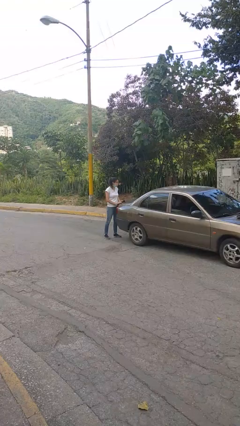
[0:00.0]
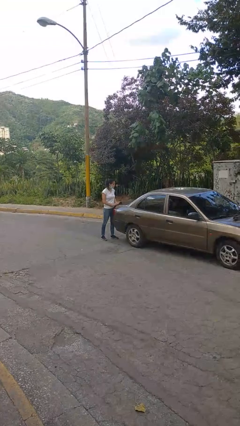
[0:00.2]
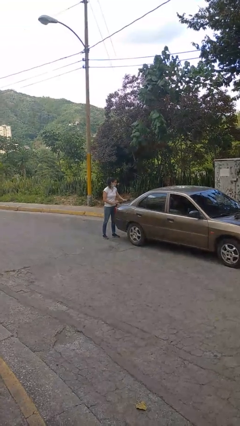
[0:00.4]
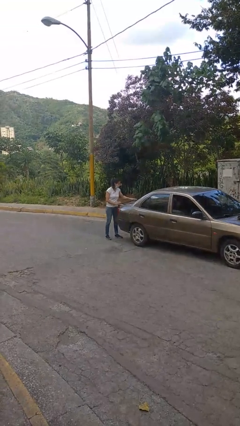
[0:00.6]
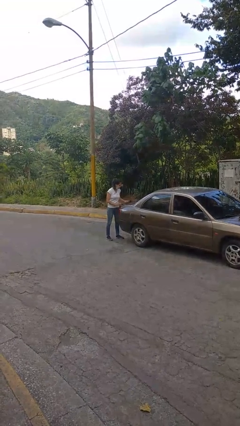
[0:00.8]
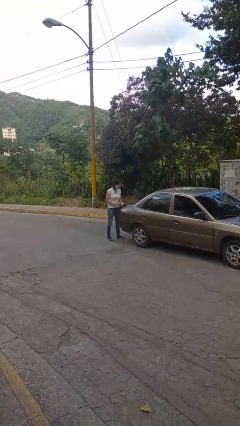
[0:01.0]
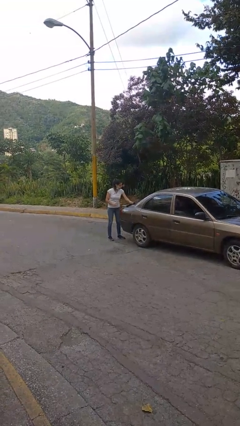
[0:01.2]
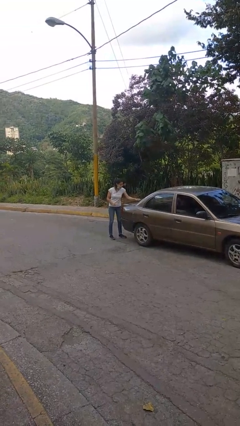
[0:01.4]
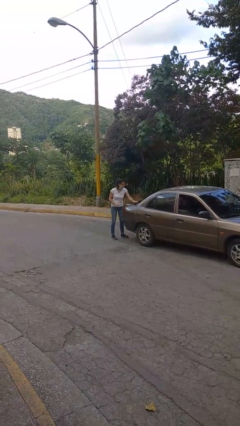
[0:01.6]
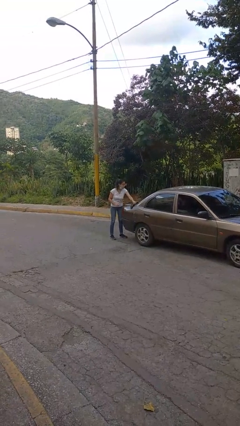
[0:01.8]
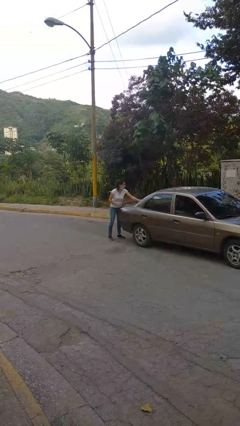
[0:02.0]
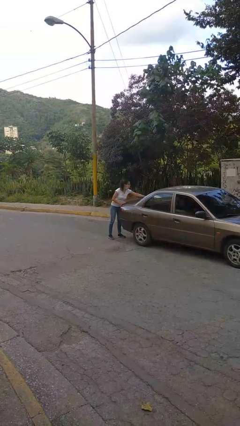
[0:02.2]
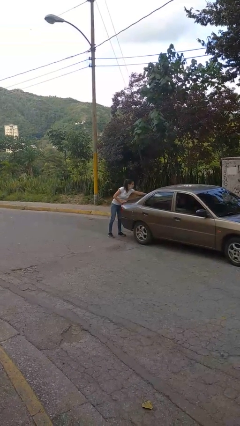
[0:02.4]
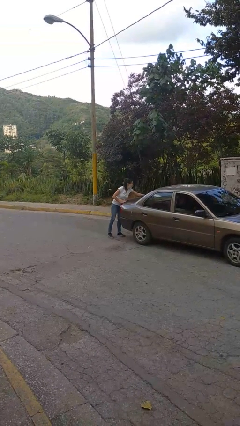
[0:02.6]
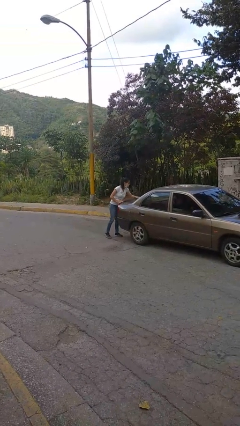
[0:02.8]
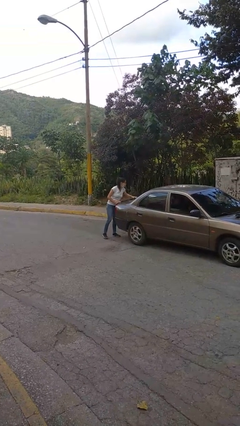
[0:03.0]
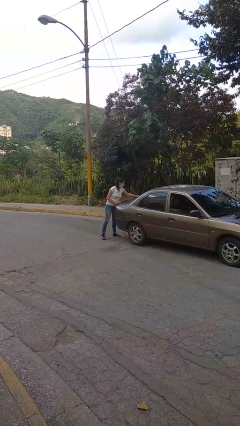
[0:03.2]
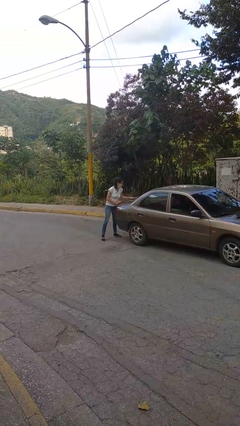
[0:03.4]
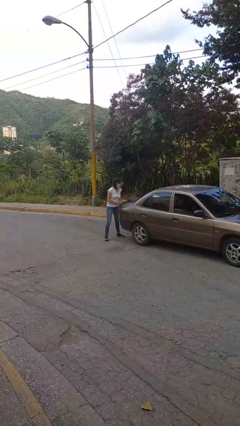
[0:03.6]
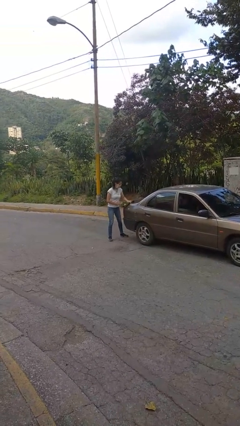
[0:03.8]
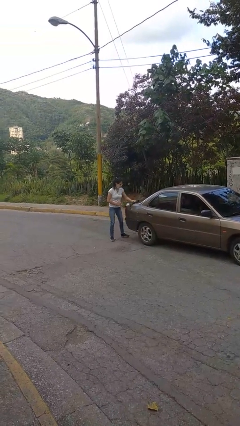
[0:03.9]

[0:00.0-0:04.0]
person polishes car with rag

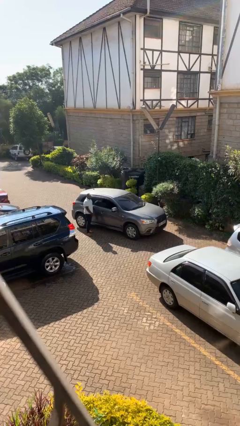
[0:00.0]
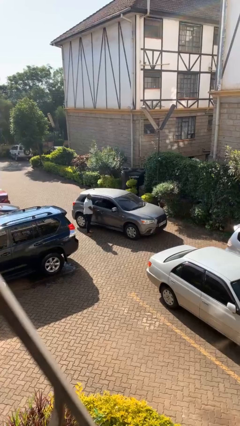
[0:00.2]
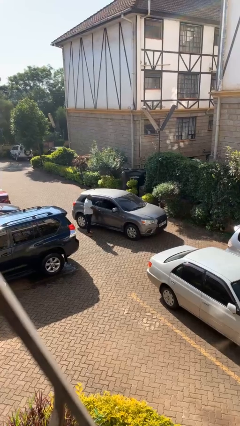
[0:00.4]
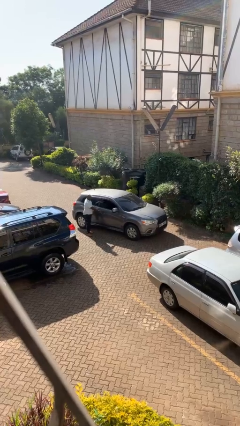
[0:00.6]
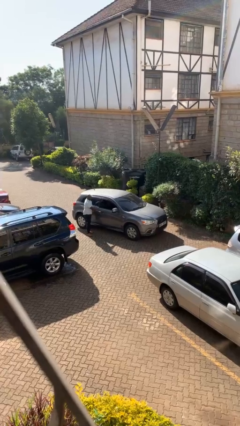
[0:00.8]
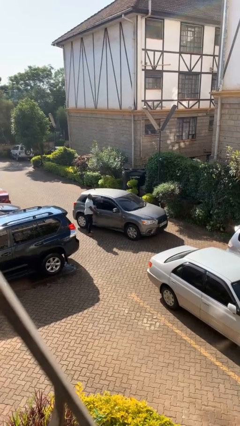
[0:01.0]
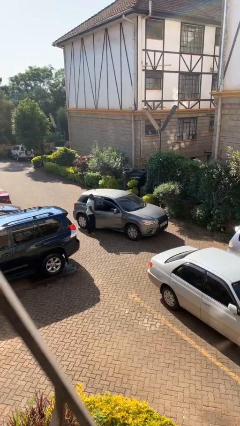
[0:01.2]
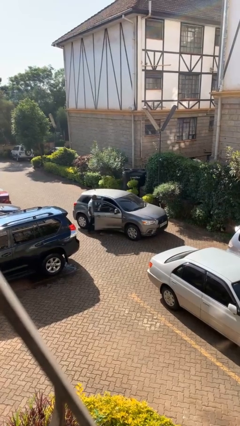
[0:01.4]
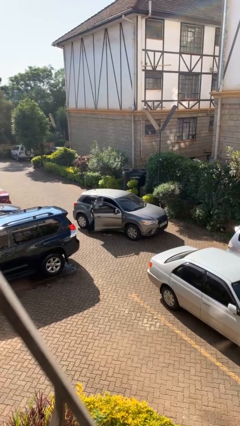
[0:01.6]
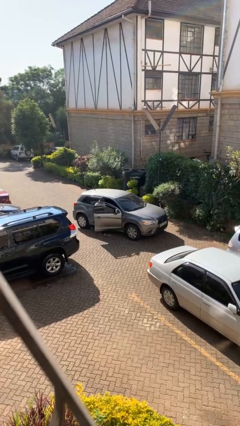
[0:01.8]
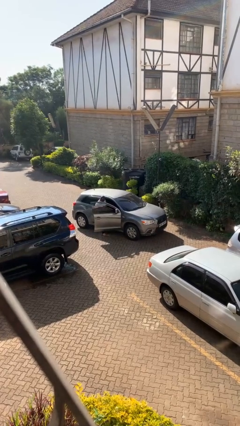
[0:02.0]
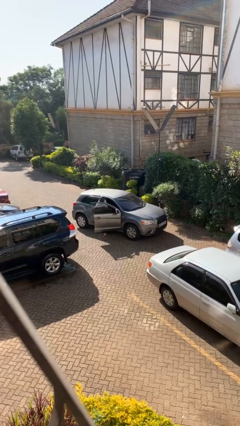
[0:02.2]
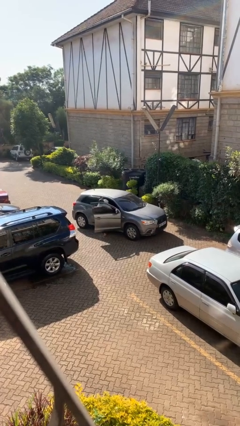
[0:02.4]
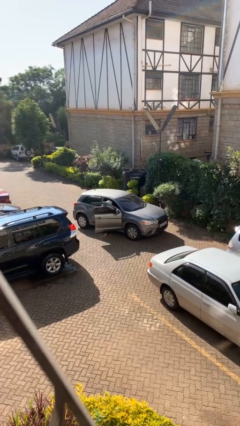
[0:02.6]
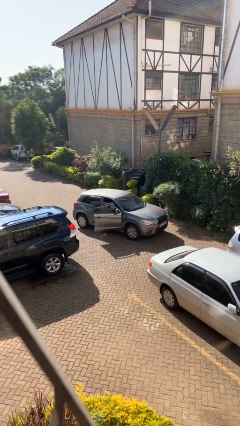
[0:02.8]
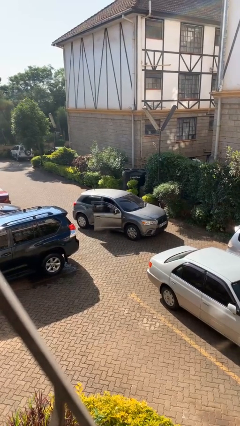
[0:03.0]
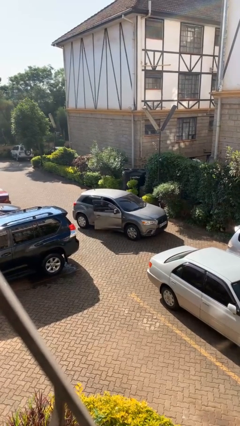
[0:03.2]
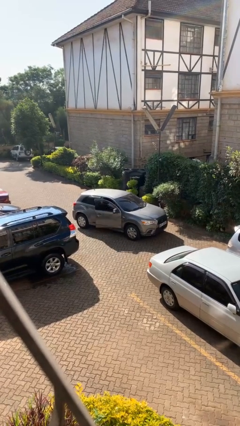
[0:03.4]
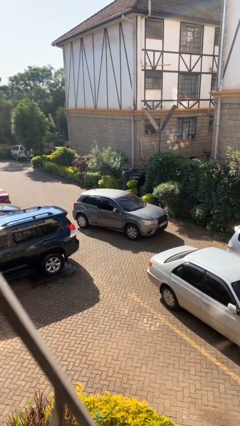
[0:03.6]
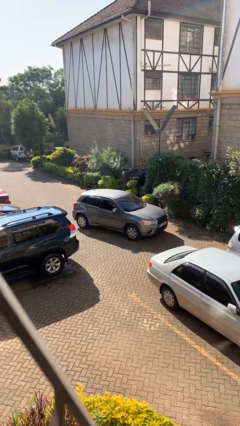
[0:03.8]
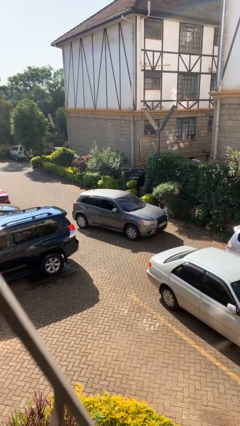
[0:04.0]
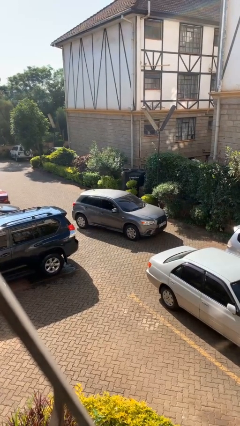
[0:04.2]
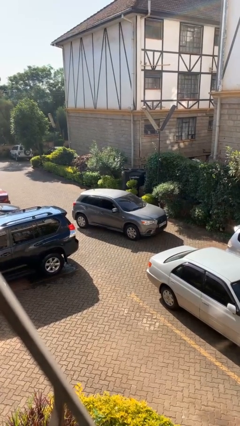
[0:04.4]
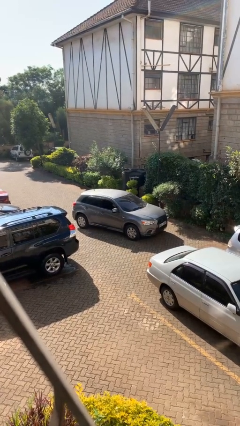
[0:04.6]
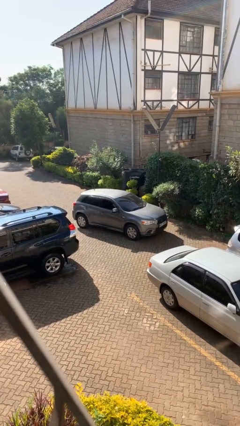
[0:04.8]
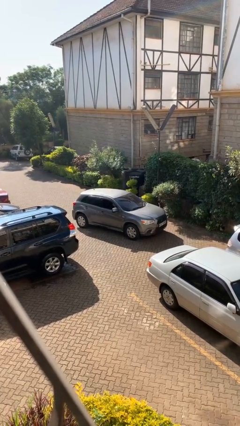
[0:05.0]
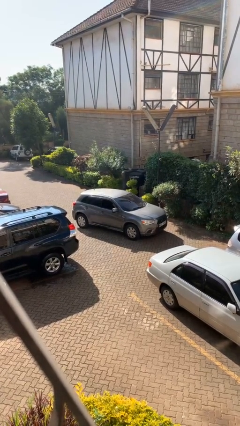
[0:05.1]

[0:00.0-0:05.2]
car picks up person

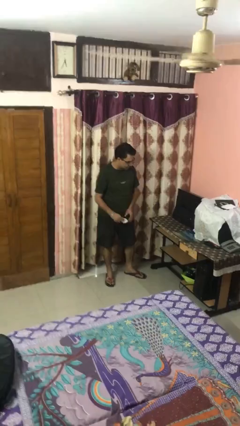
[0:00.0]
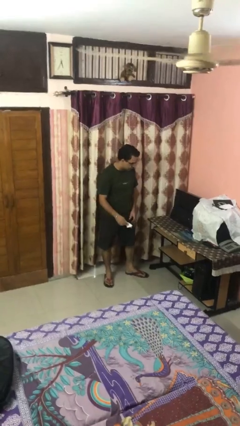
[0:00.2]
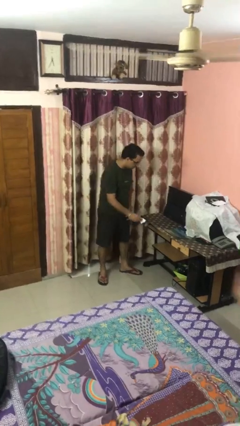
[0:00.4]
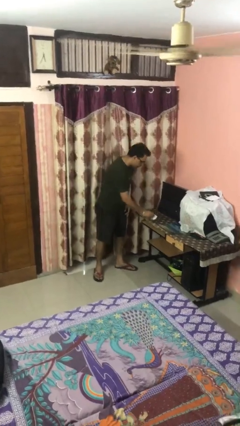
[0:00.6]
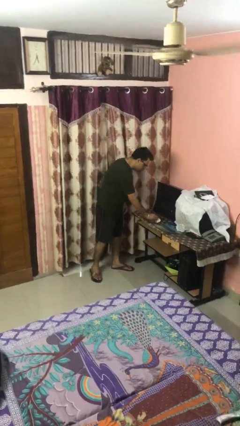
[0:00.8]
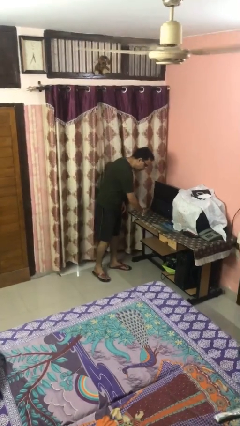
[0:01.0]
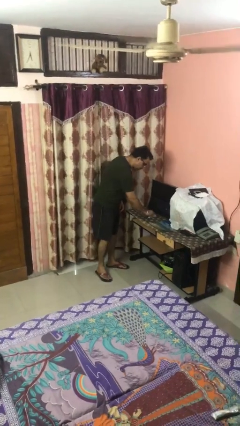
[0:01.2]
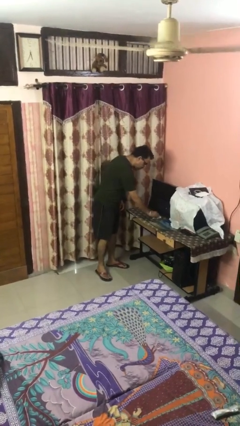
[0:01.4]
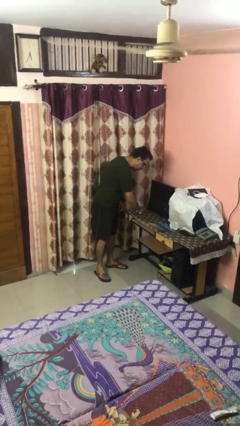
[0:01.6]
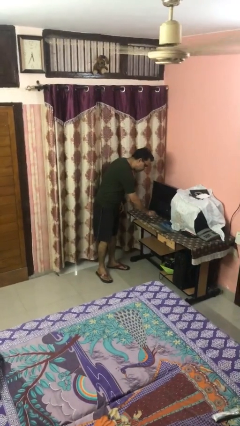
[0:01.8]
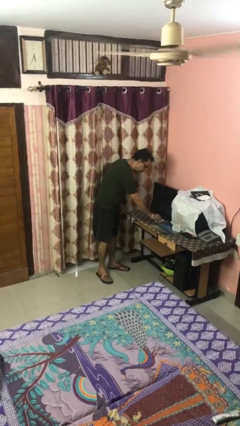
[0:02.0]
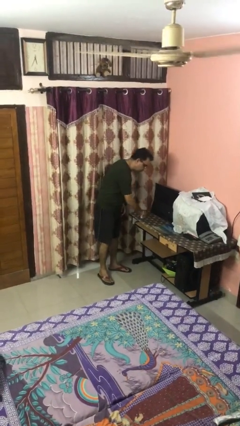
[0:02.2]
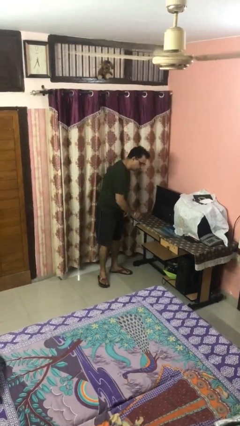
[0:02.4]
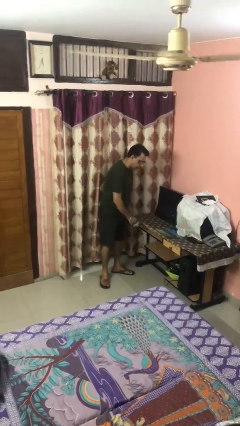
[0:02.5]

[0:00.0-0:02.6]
person cleans table with rag

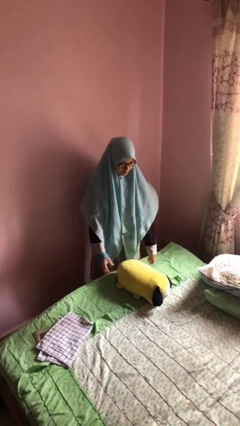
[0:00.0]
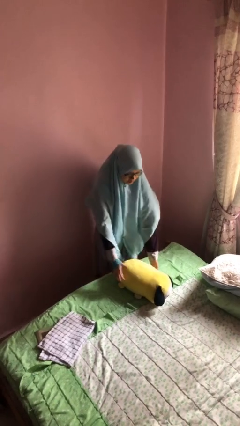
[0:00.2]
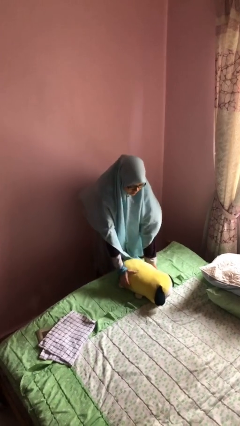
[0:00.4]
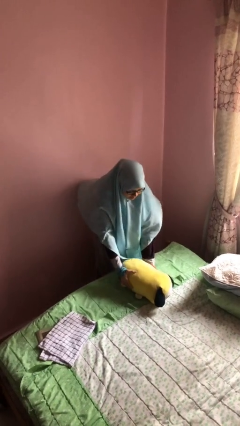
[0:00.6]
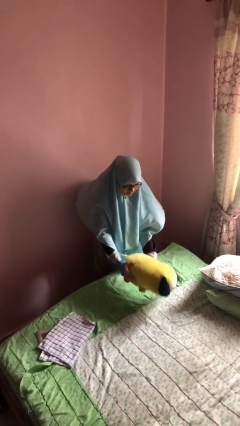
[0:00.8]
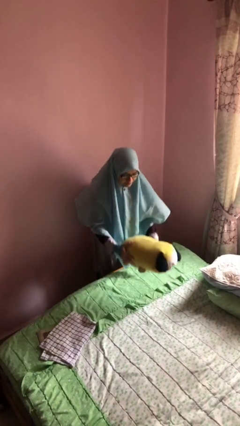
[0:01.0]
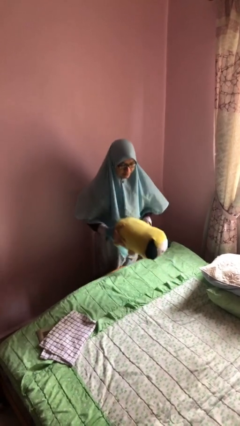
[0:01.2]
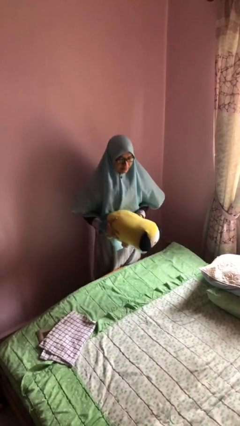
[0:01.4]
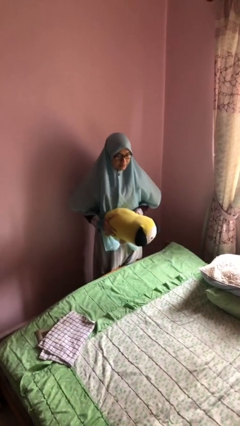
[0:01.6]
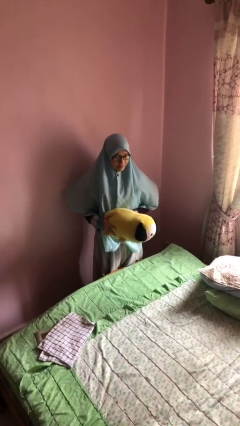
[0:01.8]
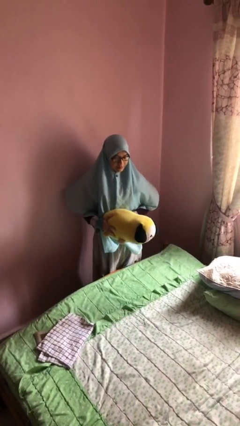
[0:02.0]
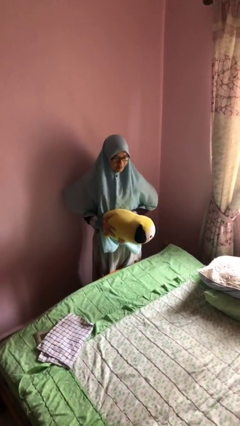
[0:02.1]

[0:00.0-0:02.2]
person picks up object from bed

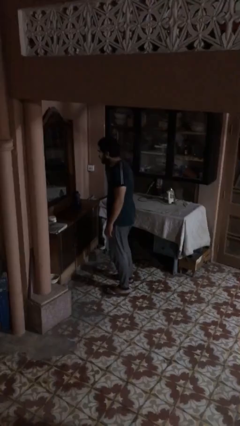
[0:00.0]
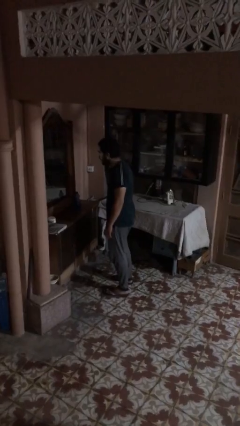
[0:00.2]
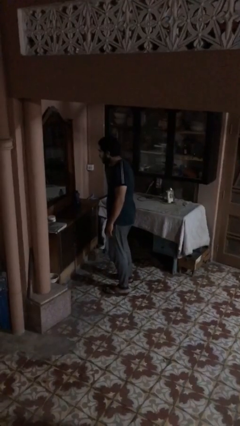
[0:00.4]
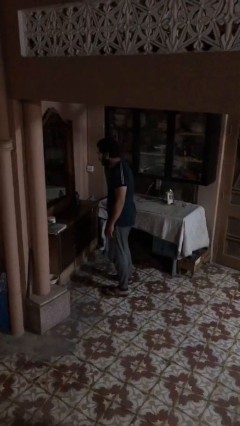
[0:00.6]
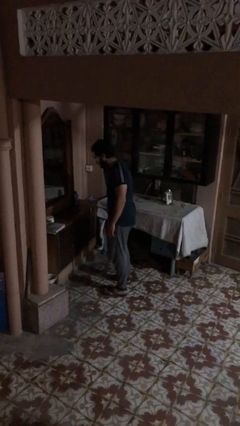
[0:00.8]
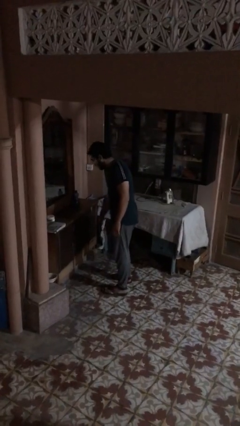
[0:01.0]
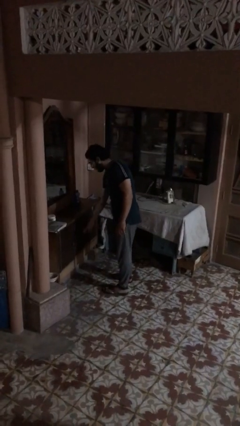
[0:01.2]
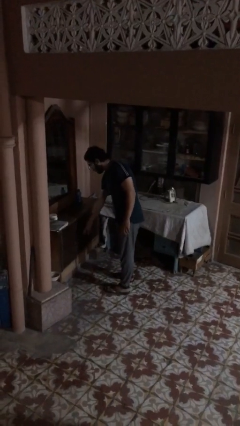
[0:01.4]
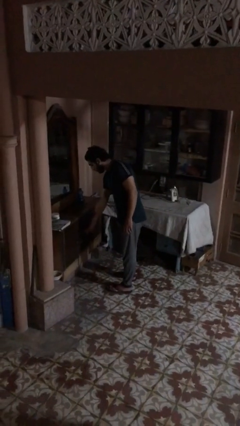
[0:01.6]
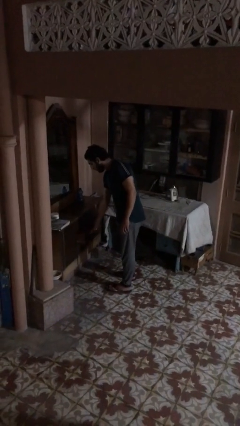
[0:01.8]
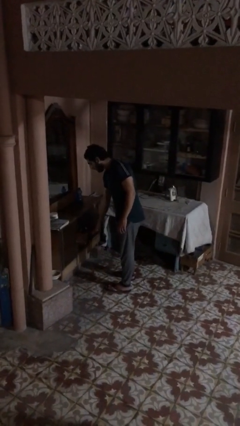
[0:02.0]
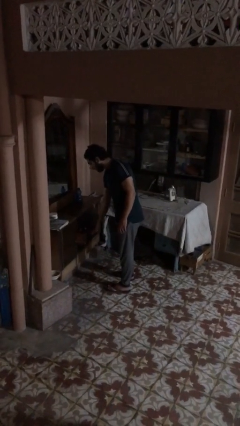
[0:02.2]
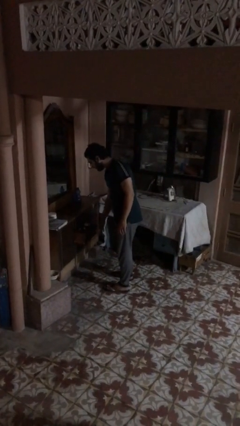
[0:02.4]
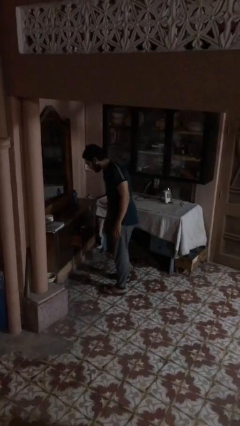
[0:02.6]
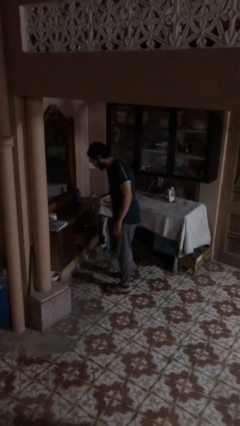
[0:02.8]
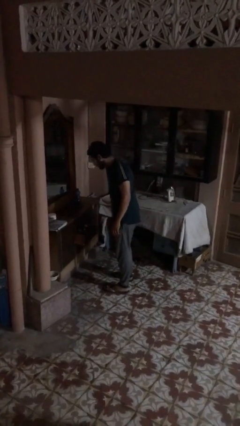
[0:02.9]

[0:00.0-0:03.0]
person opens dresser drawer

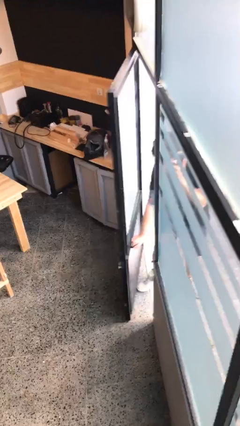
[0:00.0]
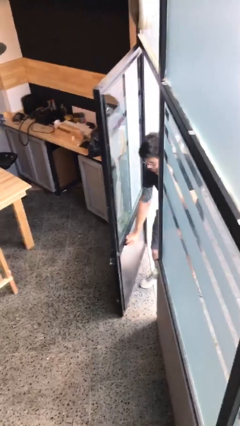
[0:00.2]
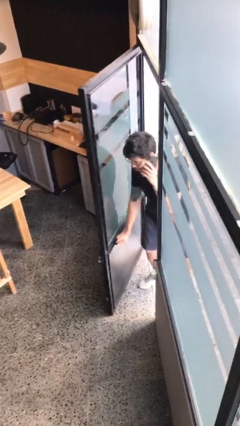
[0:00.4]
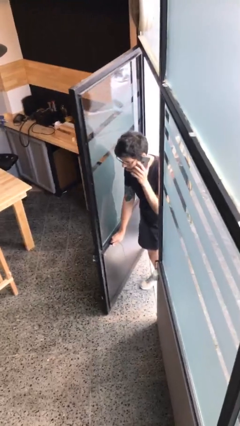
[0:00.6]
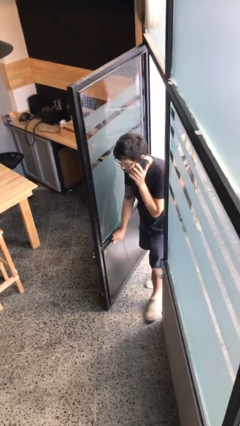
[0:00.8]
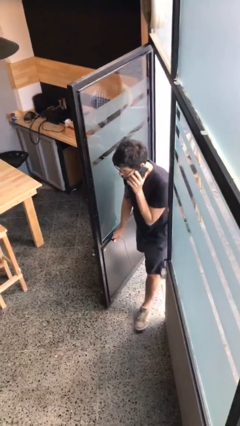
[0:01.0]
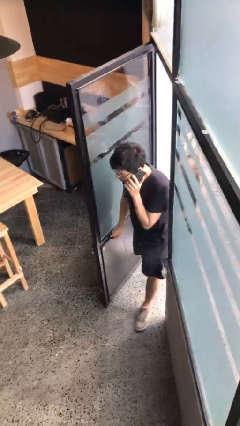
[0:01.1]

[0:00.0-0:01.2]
person opens facility door
